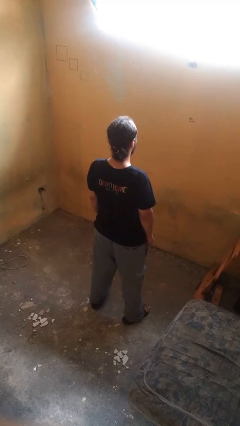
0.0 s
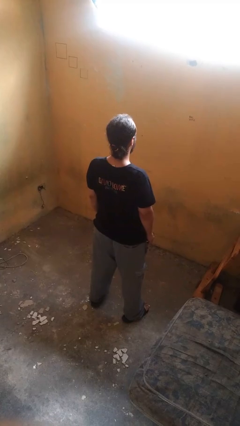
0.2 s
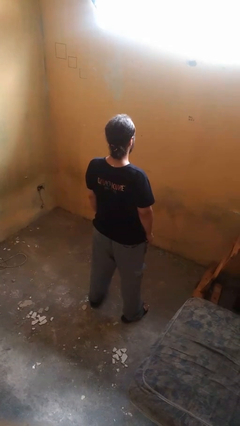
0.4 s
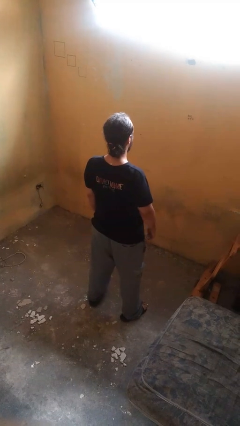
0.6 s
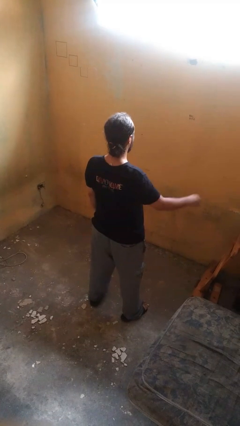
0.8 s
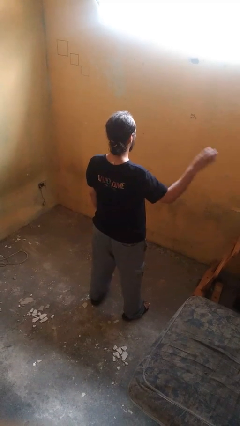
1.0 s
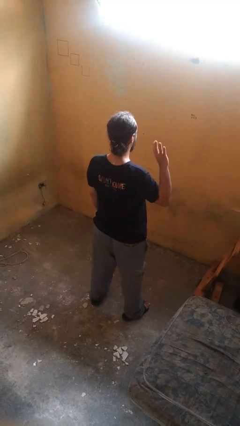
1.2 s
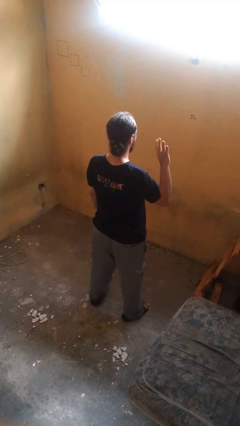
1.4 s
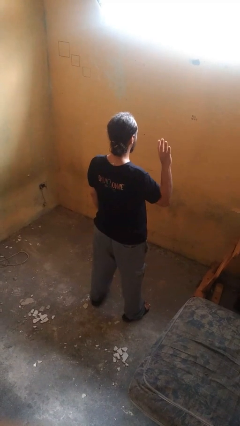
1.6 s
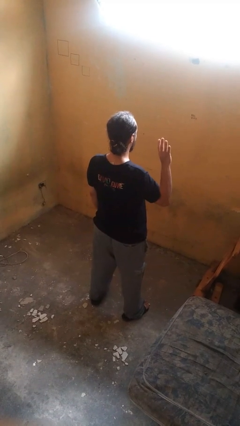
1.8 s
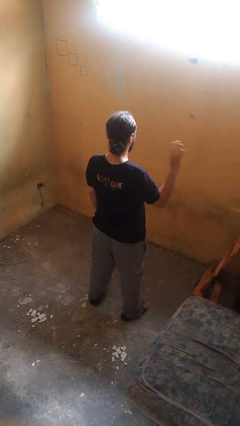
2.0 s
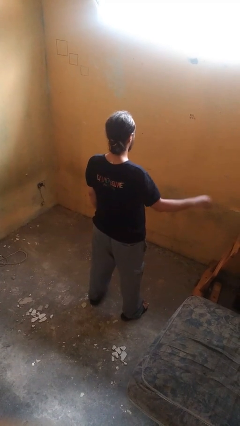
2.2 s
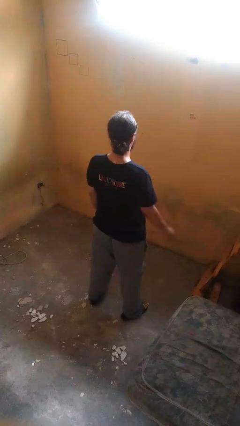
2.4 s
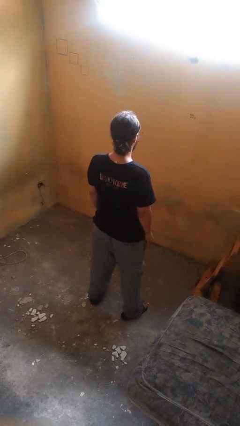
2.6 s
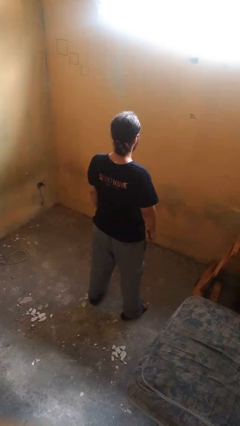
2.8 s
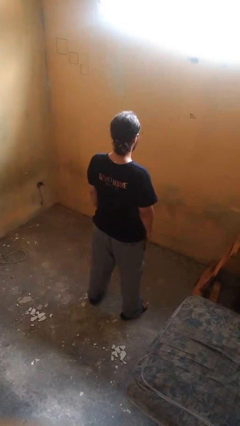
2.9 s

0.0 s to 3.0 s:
person gestures number four

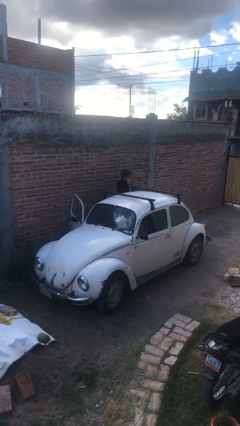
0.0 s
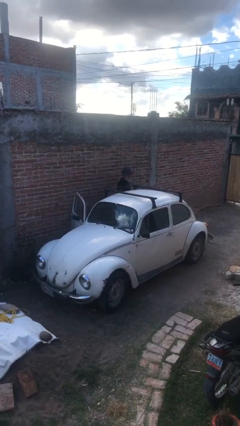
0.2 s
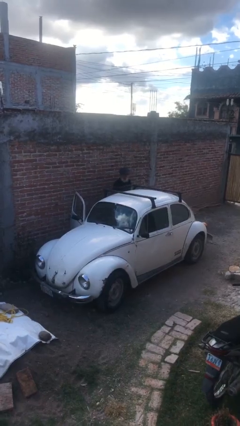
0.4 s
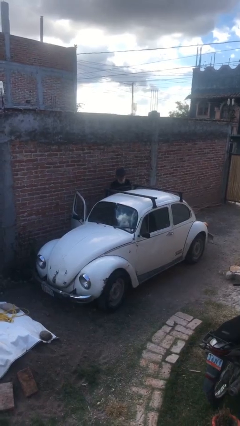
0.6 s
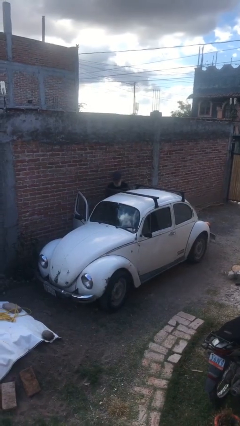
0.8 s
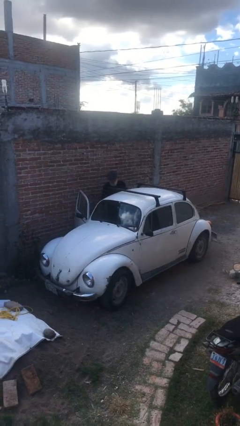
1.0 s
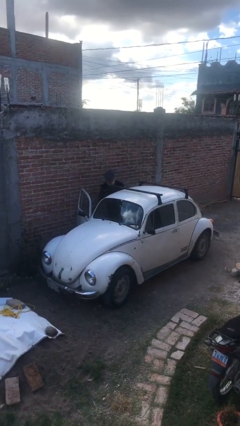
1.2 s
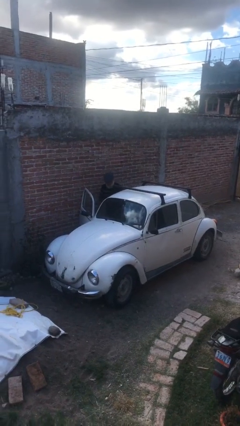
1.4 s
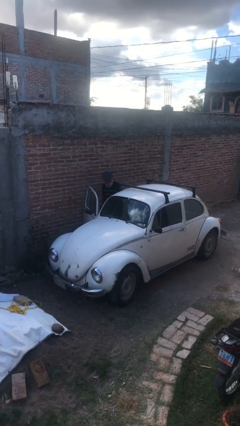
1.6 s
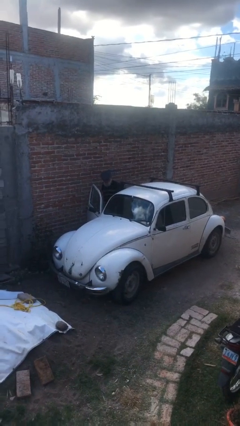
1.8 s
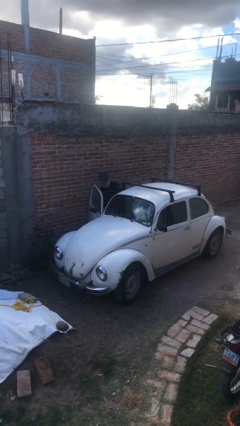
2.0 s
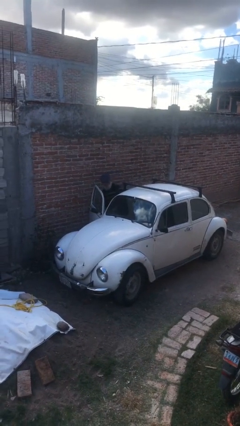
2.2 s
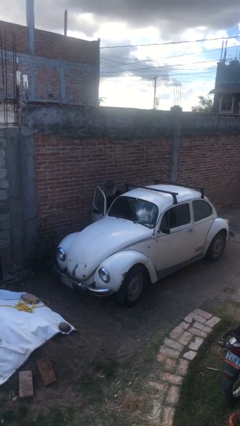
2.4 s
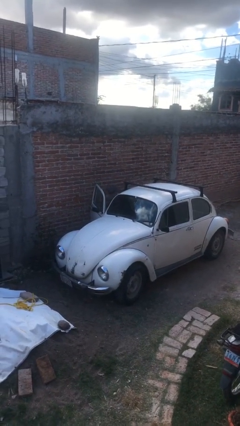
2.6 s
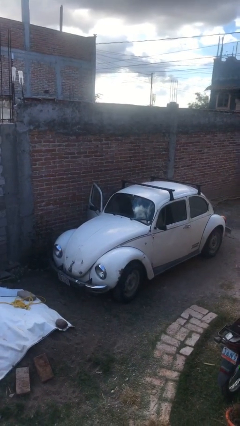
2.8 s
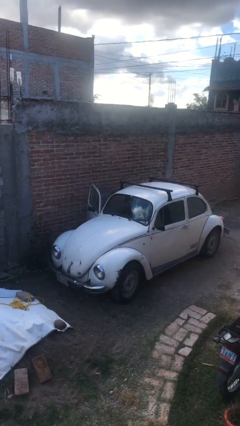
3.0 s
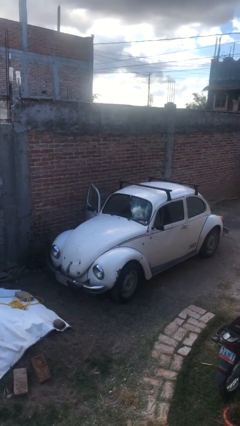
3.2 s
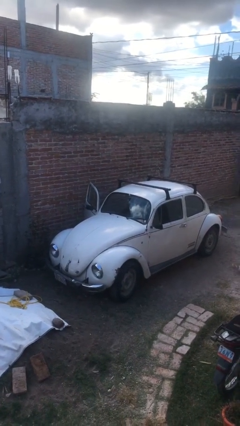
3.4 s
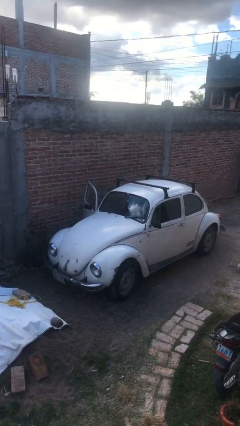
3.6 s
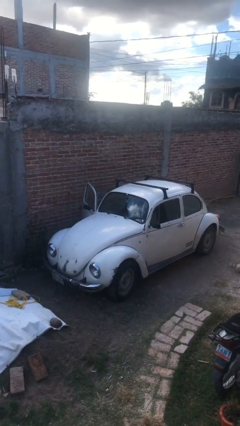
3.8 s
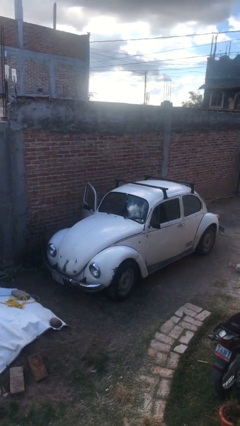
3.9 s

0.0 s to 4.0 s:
person enters car

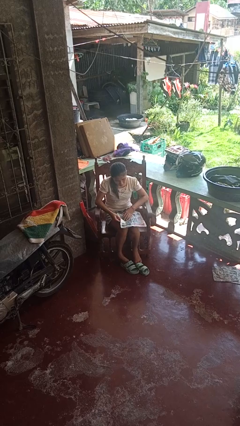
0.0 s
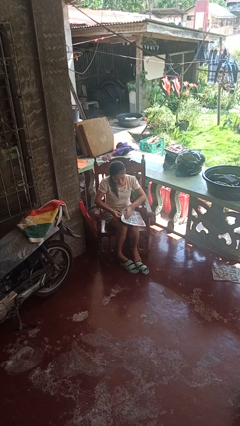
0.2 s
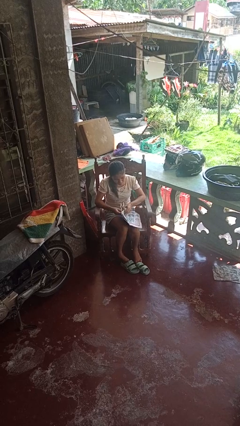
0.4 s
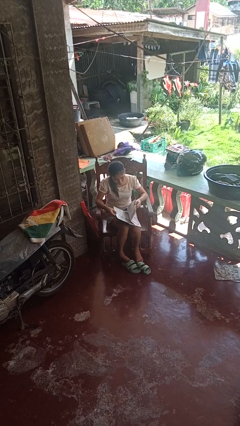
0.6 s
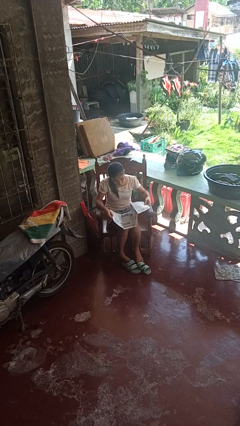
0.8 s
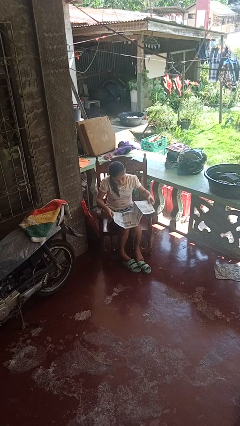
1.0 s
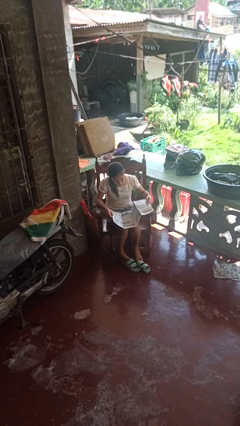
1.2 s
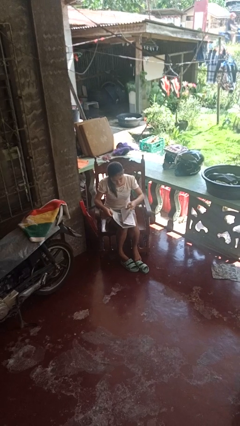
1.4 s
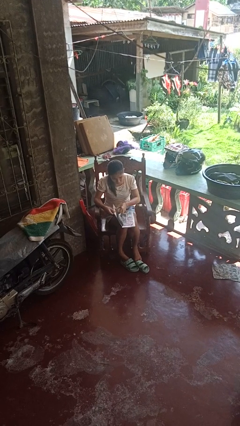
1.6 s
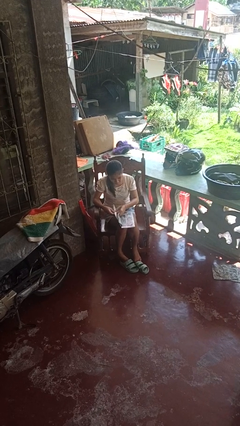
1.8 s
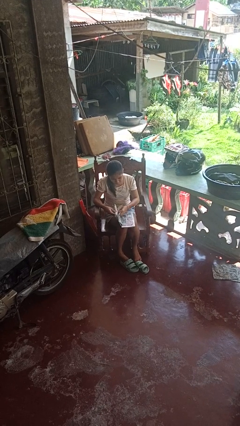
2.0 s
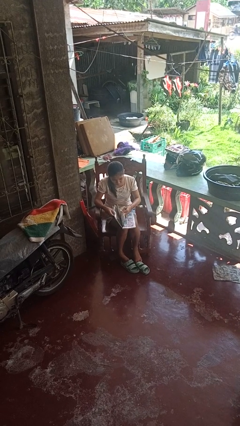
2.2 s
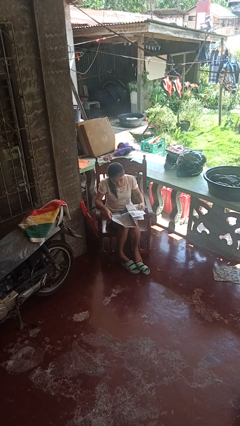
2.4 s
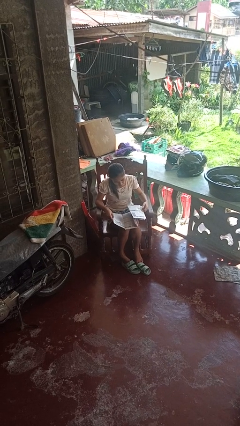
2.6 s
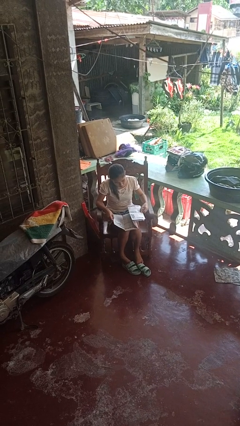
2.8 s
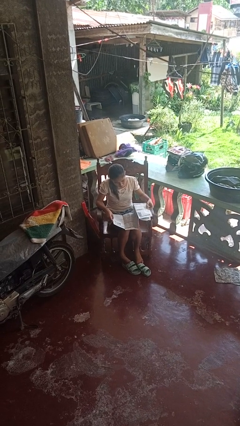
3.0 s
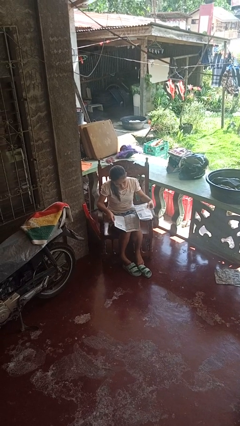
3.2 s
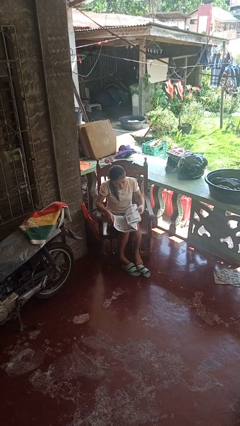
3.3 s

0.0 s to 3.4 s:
person reads newspaper

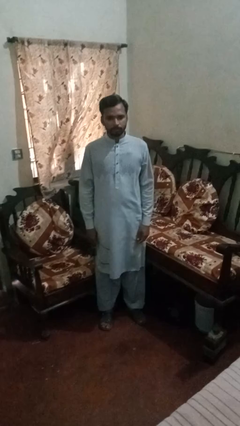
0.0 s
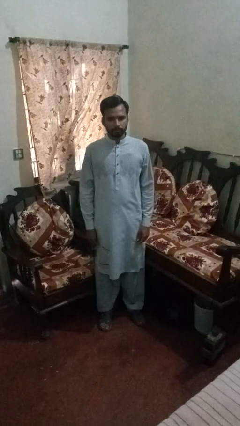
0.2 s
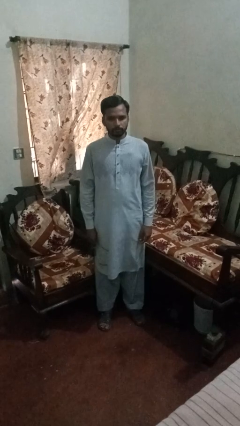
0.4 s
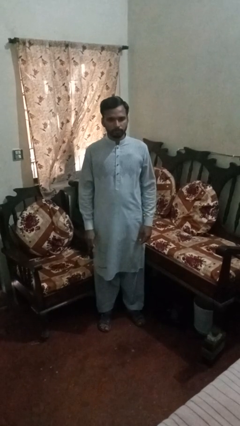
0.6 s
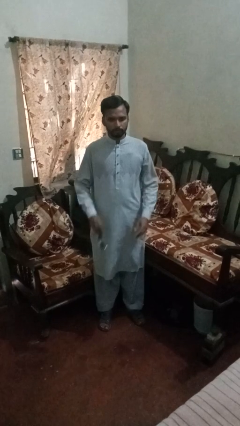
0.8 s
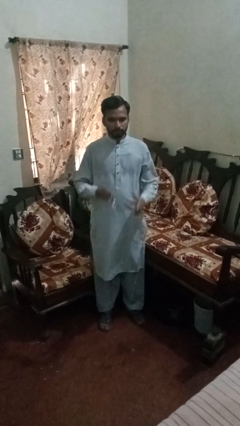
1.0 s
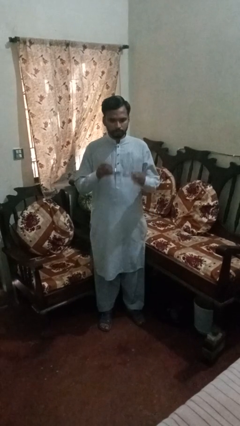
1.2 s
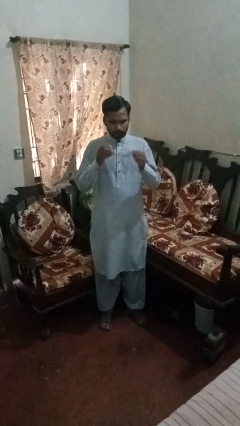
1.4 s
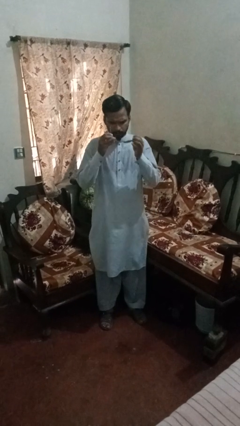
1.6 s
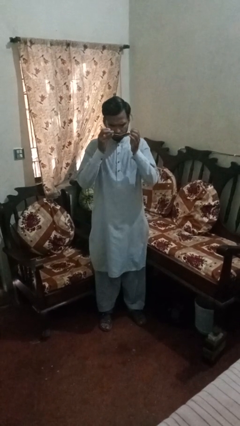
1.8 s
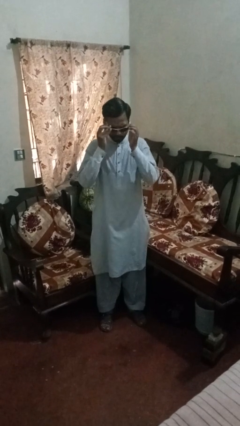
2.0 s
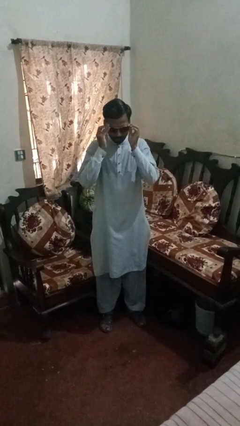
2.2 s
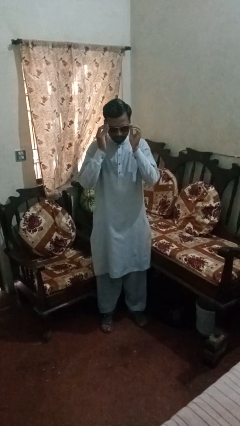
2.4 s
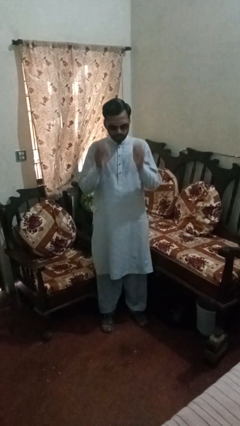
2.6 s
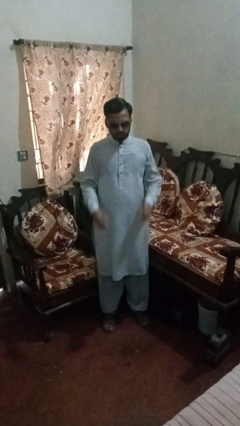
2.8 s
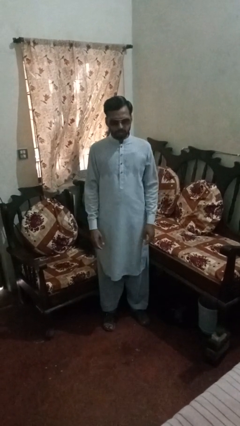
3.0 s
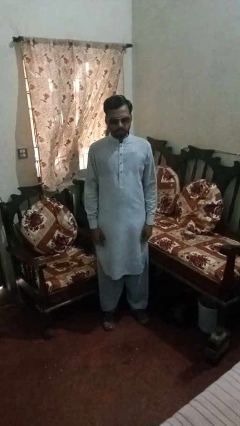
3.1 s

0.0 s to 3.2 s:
person puts on sunglasses

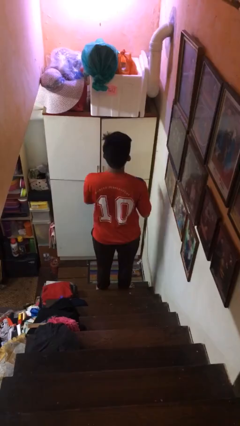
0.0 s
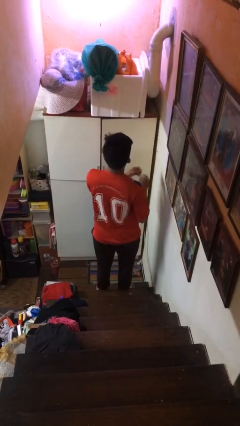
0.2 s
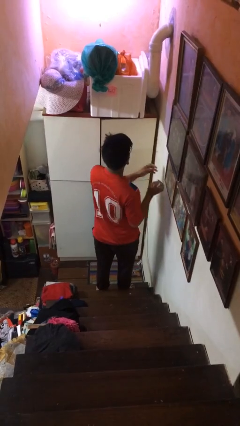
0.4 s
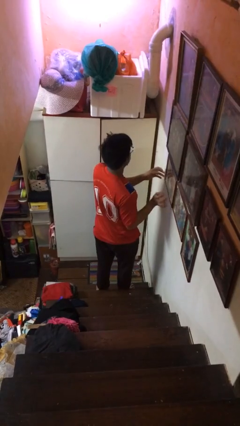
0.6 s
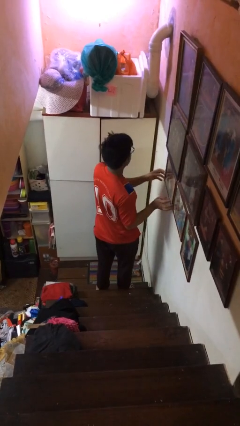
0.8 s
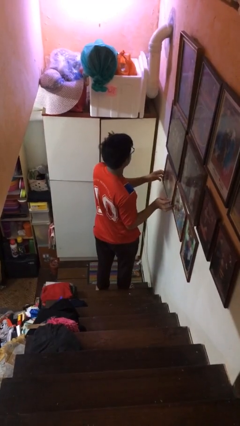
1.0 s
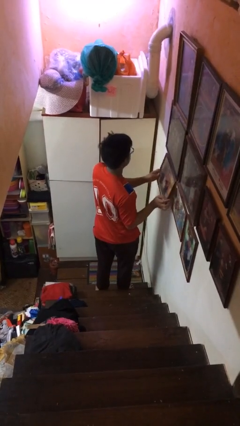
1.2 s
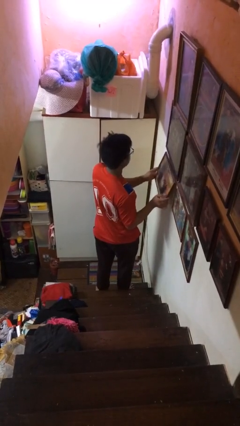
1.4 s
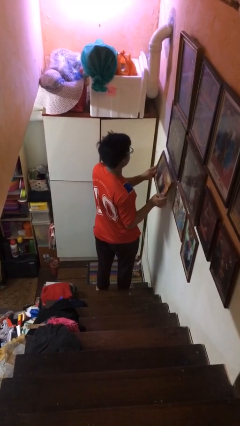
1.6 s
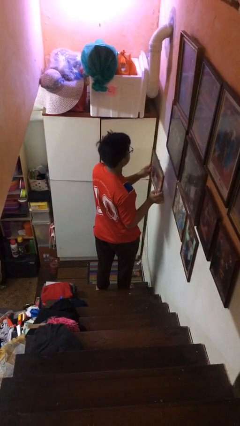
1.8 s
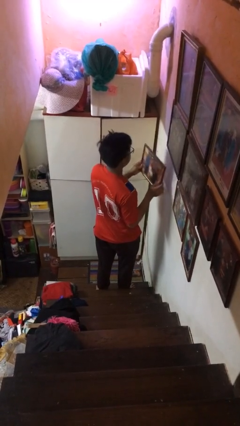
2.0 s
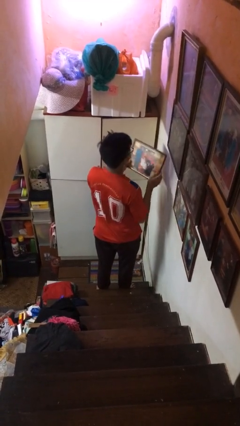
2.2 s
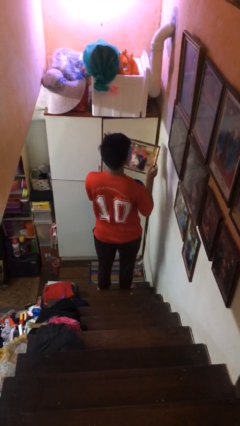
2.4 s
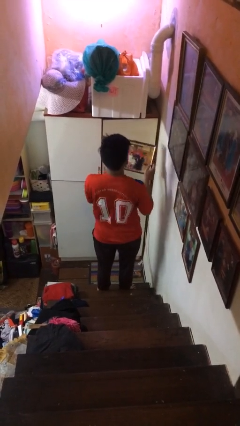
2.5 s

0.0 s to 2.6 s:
person takes down picture frame

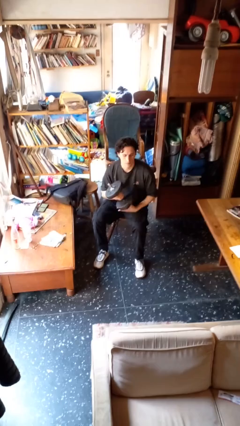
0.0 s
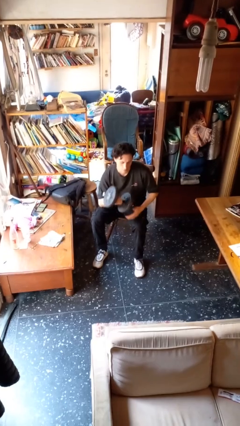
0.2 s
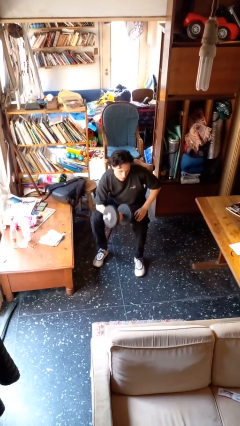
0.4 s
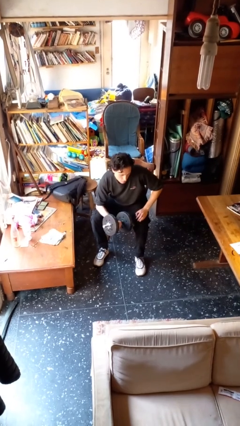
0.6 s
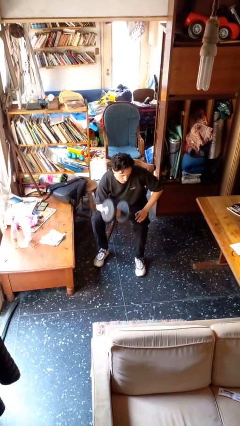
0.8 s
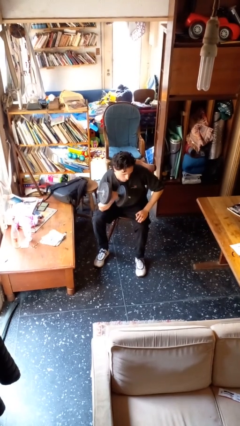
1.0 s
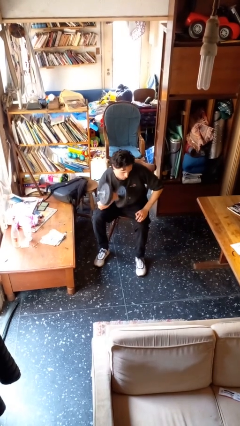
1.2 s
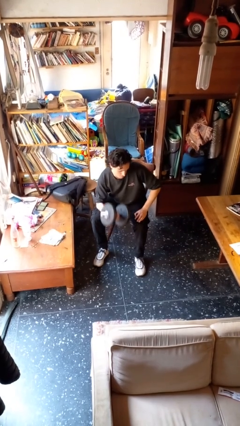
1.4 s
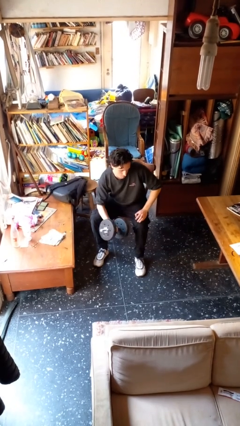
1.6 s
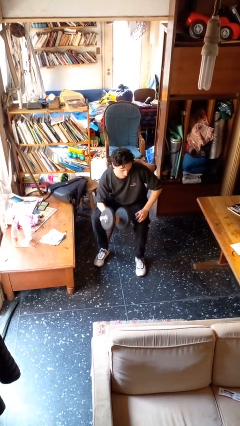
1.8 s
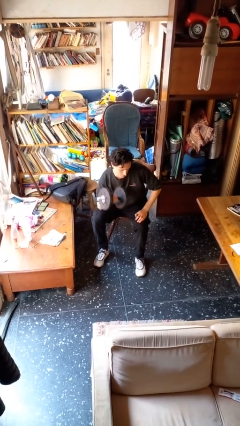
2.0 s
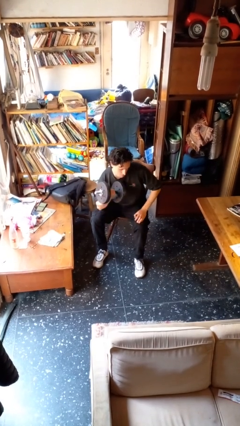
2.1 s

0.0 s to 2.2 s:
person lifts dumbbells
